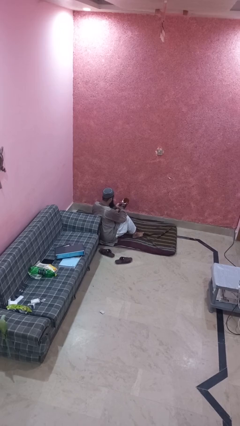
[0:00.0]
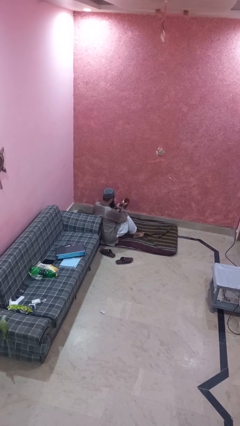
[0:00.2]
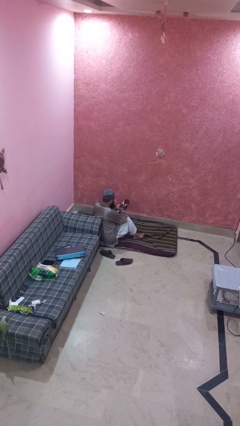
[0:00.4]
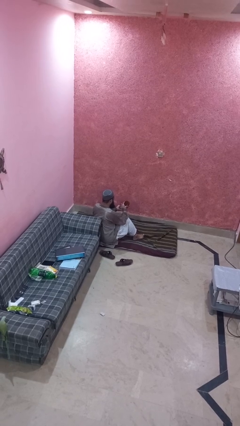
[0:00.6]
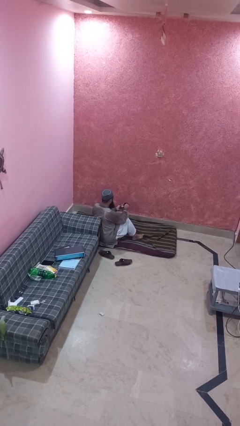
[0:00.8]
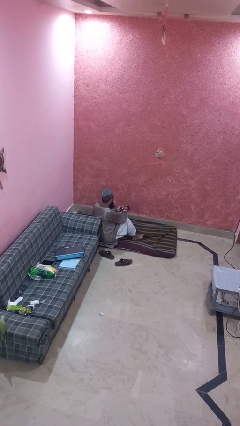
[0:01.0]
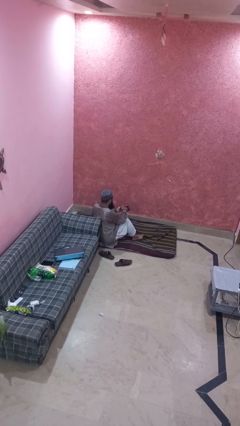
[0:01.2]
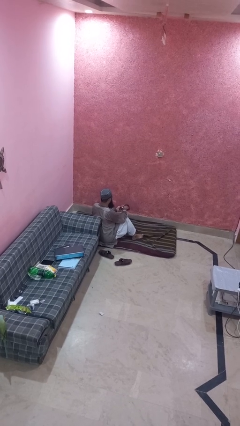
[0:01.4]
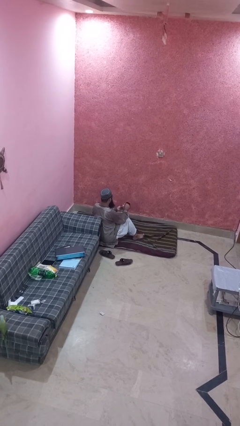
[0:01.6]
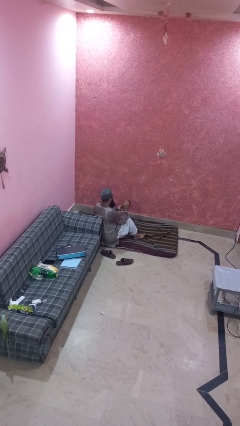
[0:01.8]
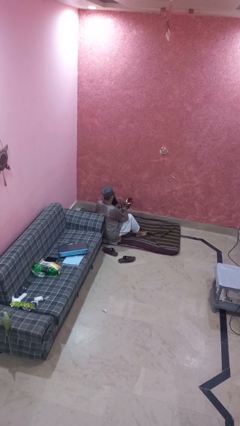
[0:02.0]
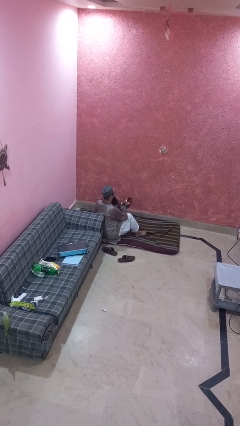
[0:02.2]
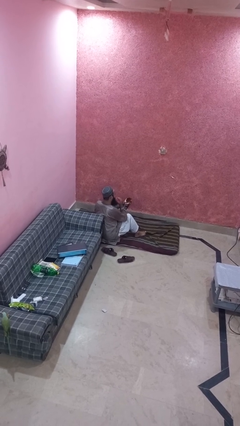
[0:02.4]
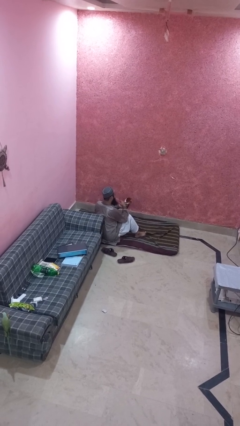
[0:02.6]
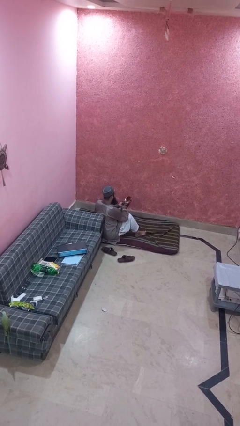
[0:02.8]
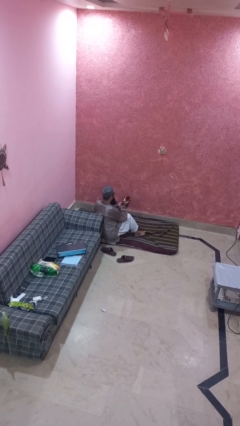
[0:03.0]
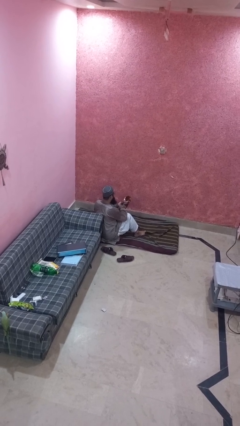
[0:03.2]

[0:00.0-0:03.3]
person eats snack from bag

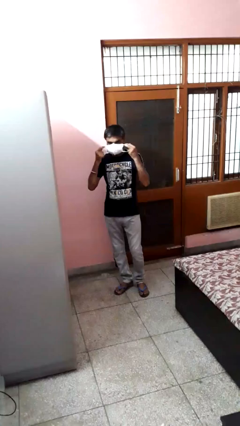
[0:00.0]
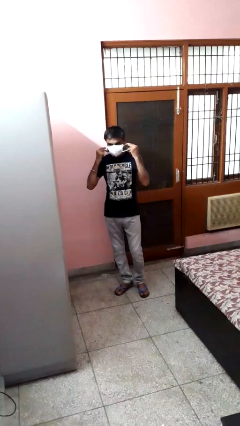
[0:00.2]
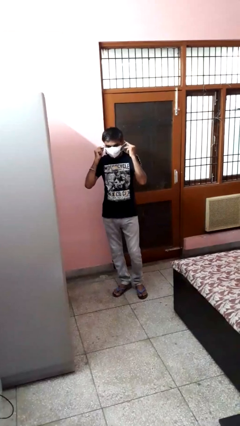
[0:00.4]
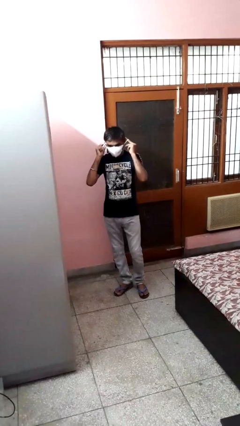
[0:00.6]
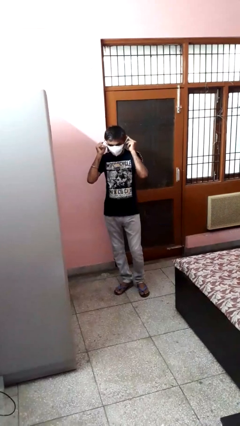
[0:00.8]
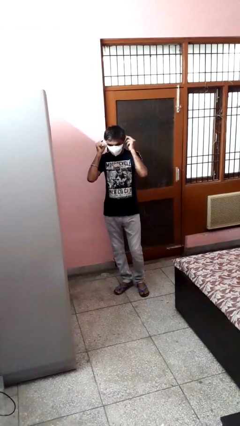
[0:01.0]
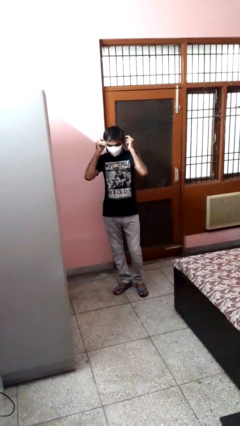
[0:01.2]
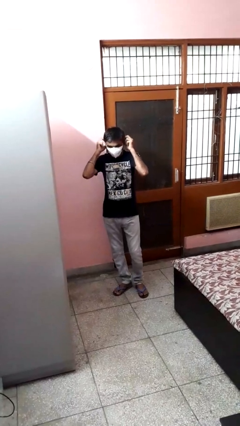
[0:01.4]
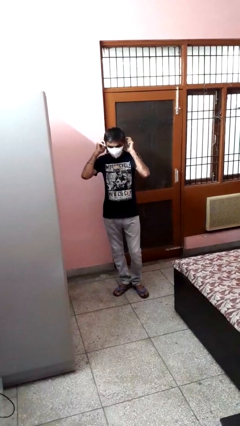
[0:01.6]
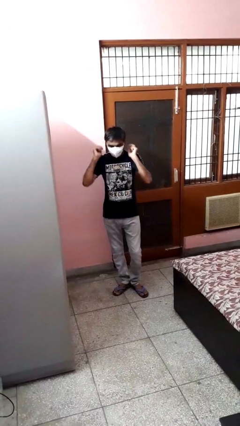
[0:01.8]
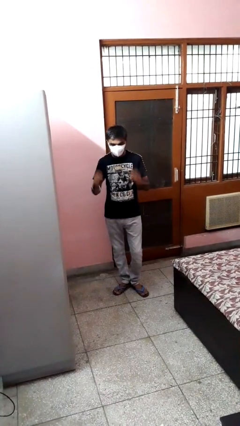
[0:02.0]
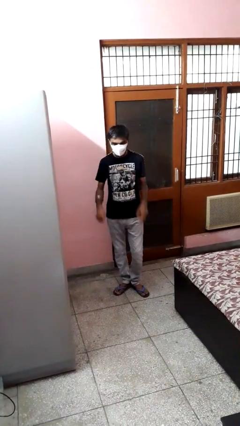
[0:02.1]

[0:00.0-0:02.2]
person puts on facemask

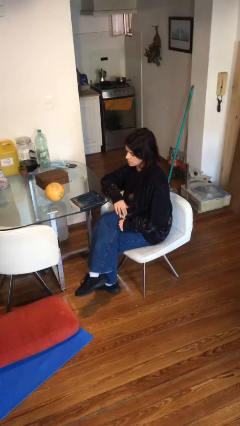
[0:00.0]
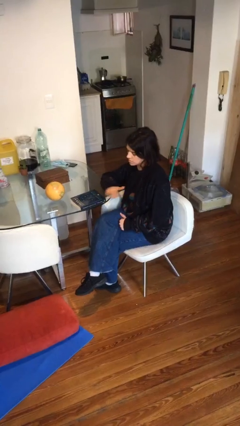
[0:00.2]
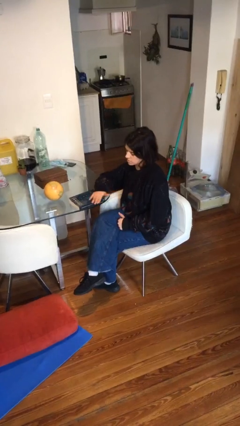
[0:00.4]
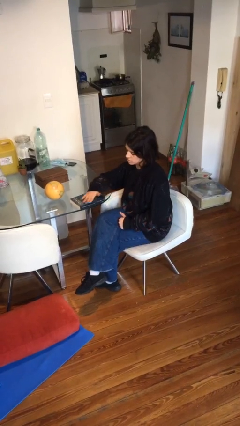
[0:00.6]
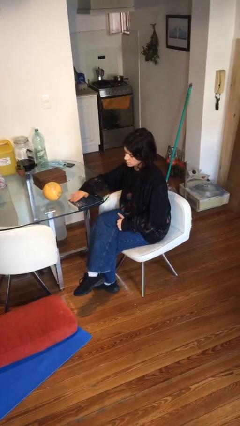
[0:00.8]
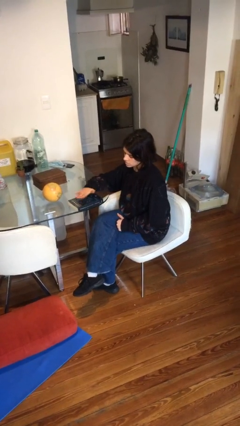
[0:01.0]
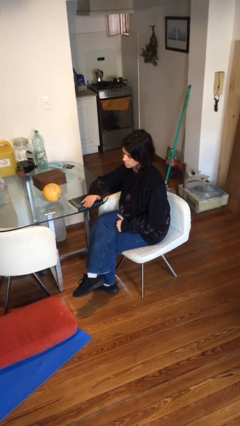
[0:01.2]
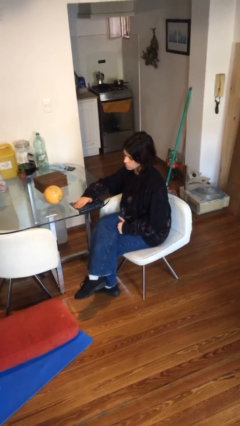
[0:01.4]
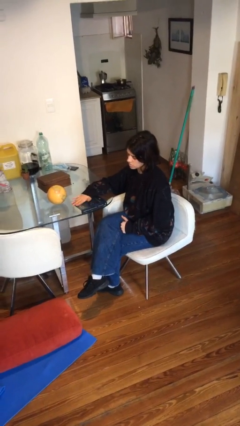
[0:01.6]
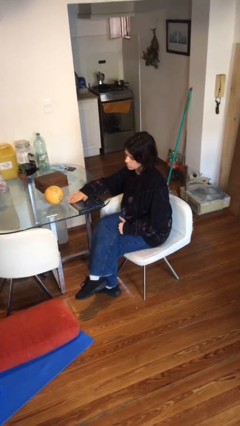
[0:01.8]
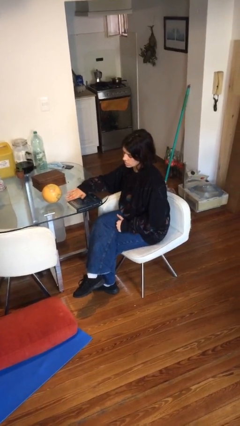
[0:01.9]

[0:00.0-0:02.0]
person waves hand over object

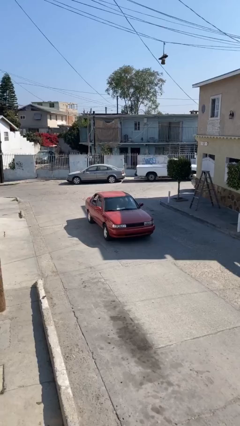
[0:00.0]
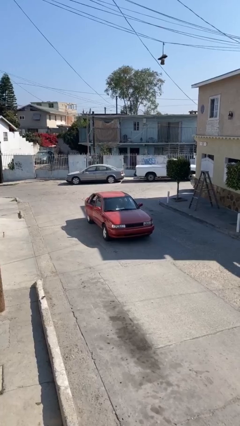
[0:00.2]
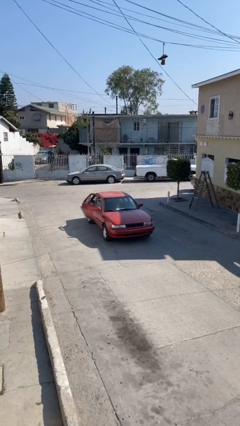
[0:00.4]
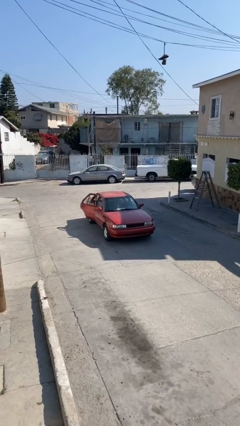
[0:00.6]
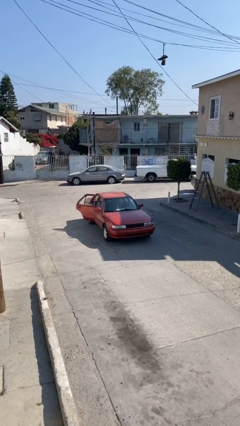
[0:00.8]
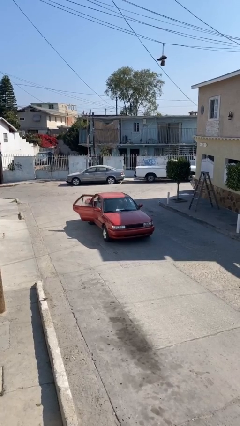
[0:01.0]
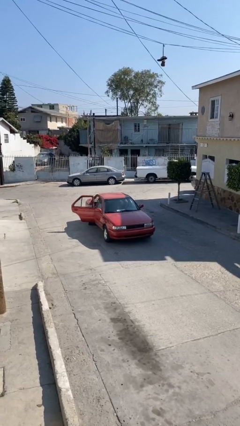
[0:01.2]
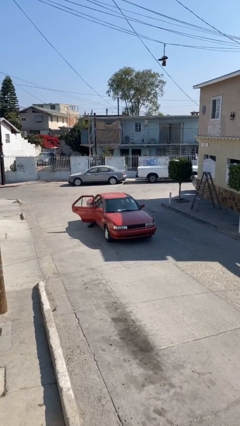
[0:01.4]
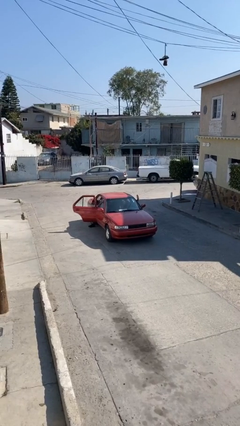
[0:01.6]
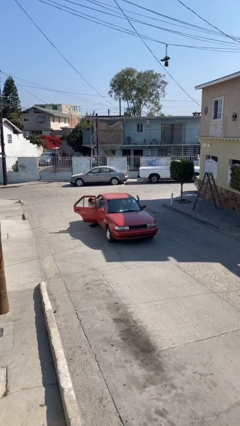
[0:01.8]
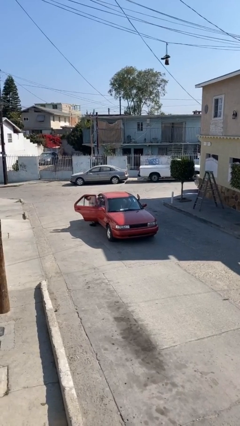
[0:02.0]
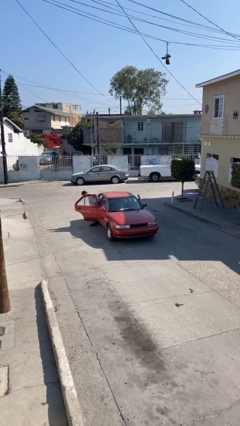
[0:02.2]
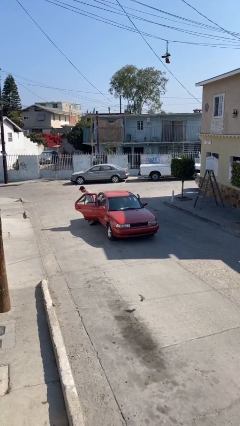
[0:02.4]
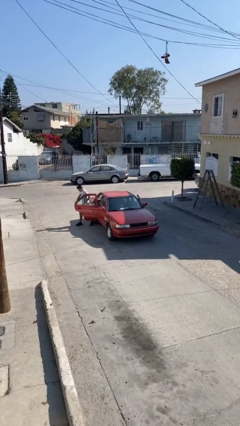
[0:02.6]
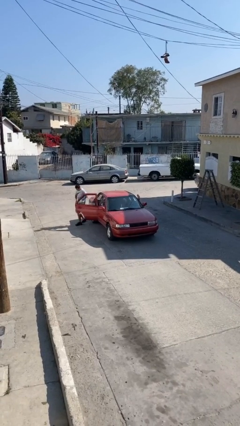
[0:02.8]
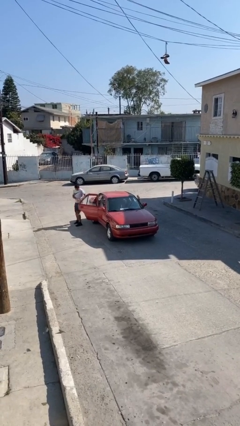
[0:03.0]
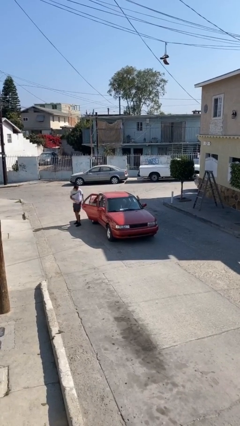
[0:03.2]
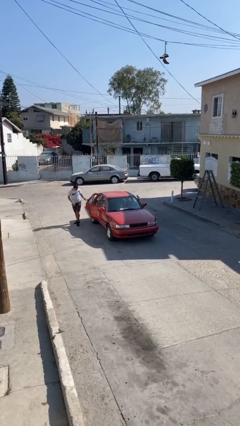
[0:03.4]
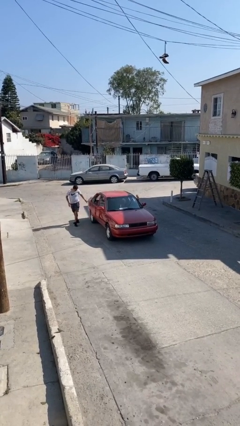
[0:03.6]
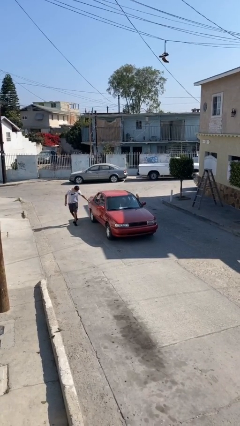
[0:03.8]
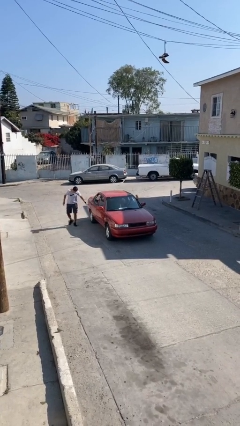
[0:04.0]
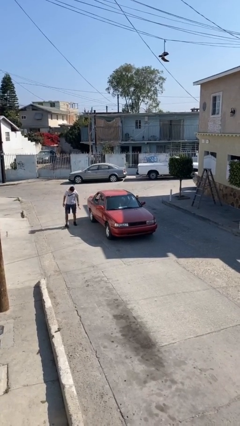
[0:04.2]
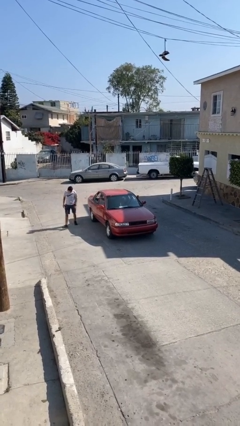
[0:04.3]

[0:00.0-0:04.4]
car drops off person

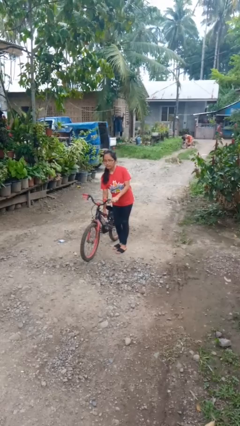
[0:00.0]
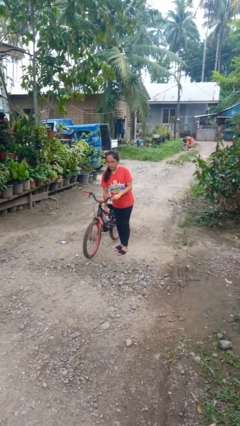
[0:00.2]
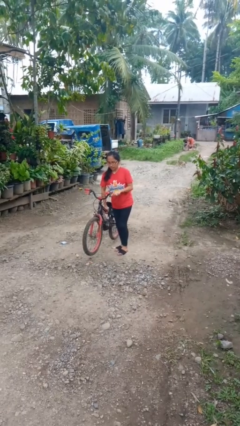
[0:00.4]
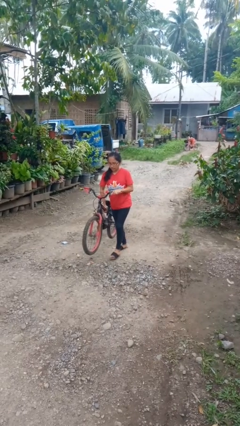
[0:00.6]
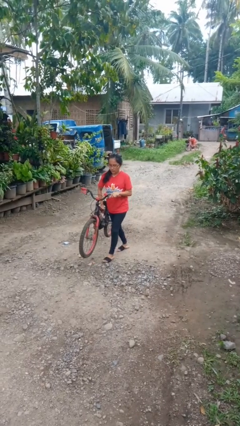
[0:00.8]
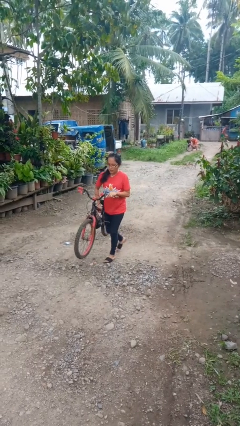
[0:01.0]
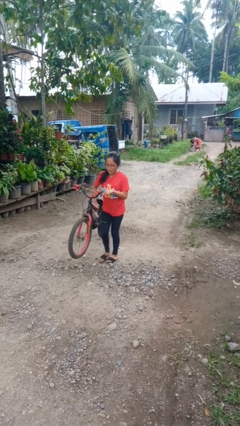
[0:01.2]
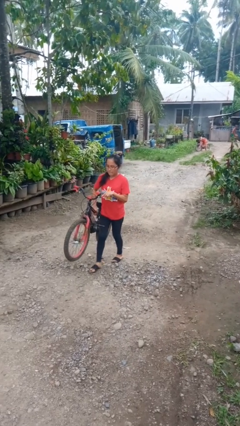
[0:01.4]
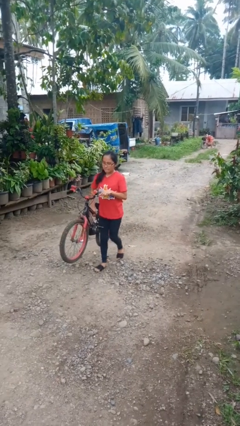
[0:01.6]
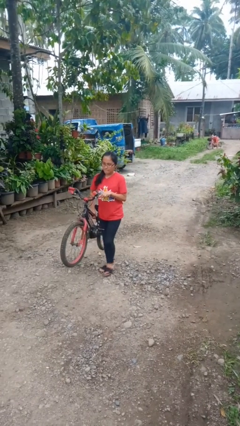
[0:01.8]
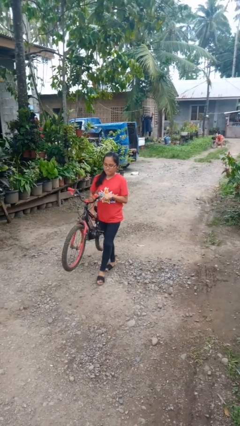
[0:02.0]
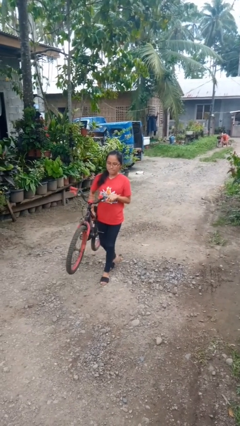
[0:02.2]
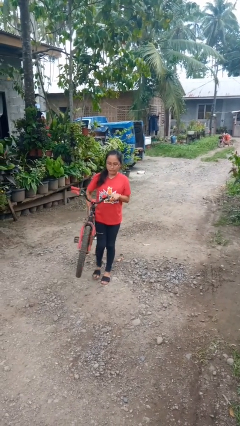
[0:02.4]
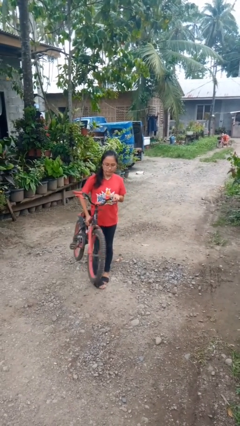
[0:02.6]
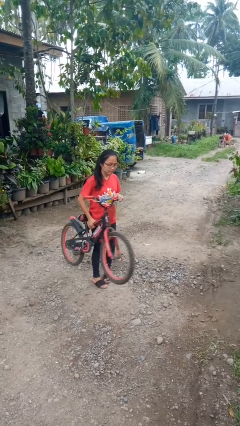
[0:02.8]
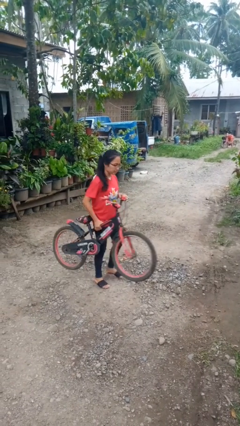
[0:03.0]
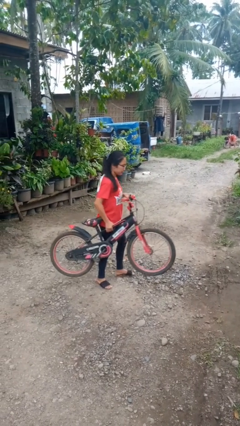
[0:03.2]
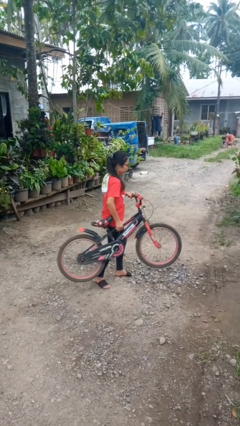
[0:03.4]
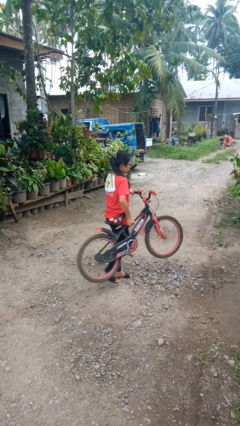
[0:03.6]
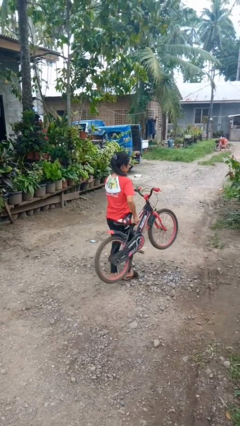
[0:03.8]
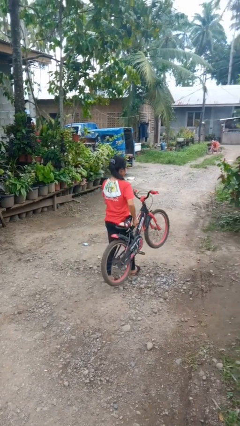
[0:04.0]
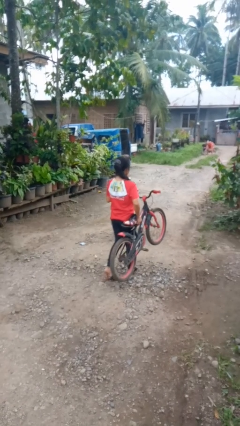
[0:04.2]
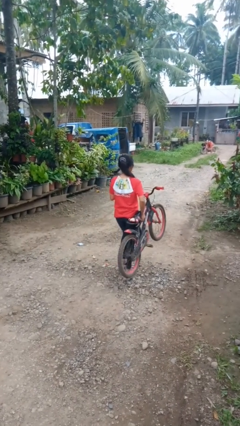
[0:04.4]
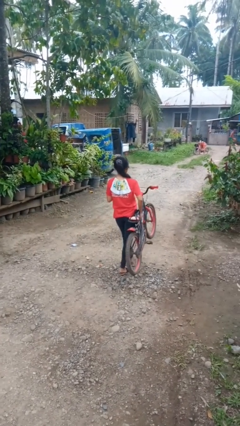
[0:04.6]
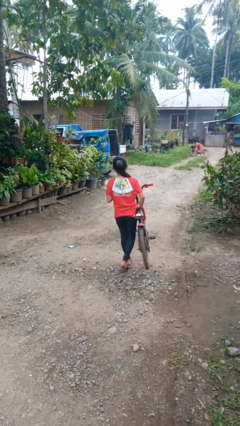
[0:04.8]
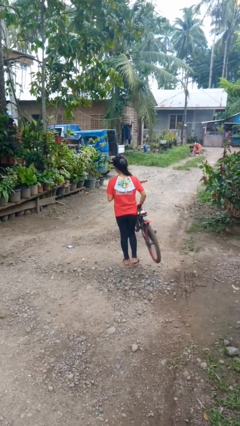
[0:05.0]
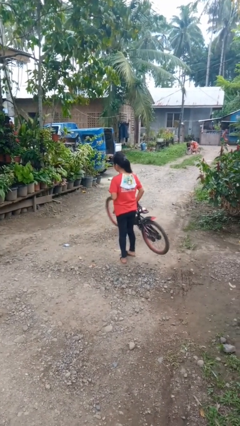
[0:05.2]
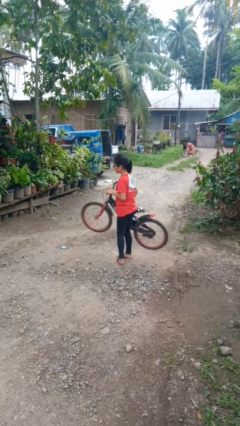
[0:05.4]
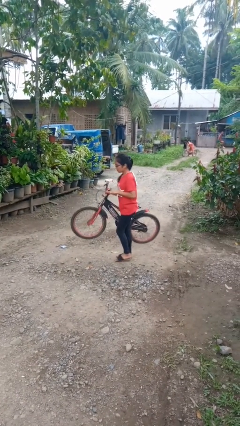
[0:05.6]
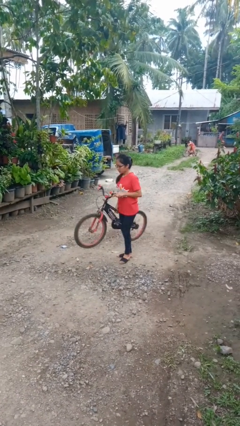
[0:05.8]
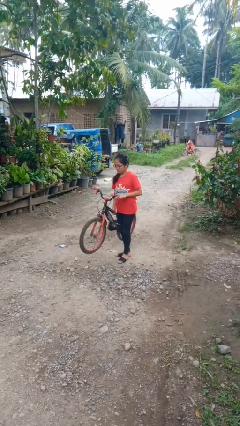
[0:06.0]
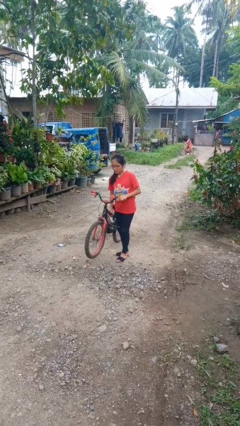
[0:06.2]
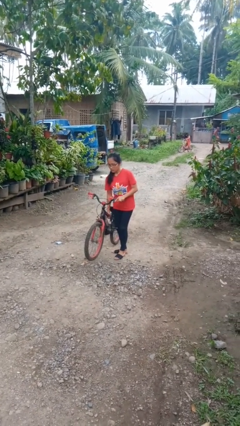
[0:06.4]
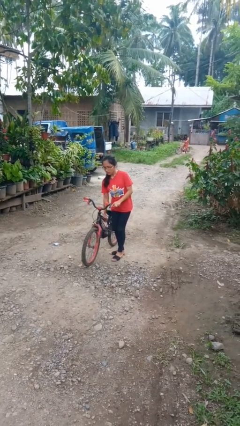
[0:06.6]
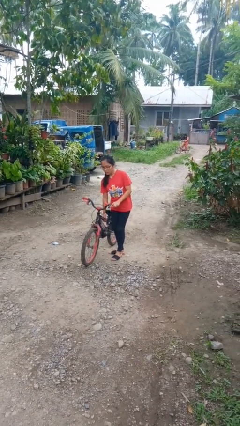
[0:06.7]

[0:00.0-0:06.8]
person carries bicycle
